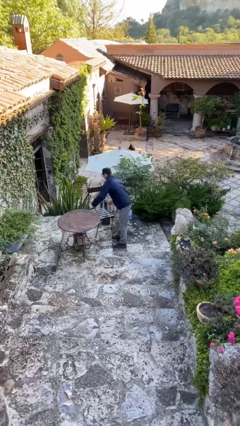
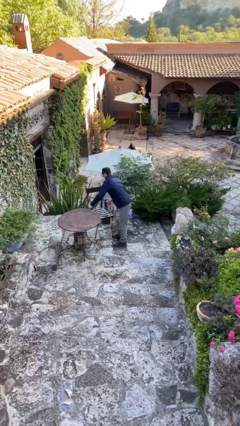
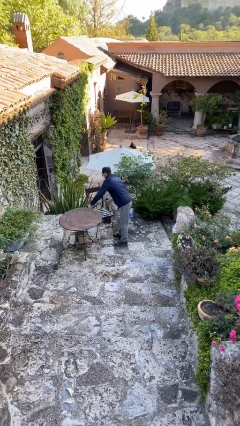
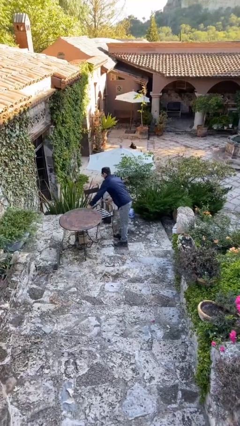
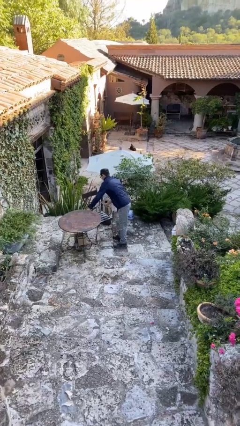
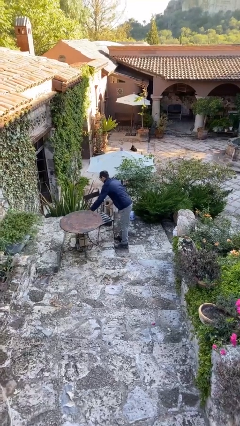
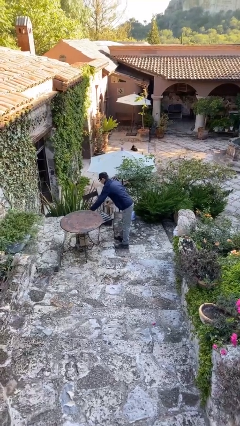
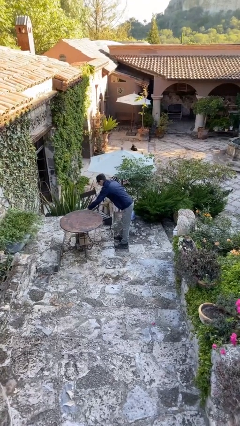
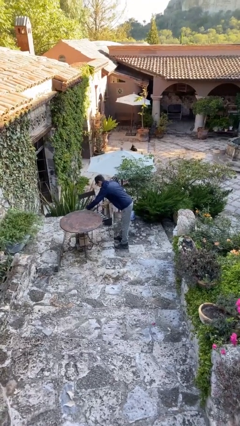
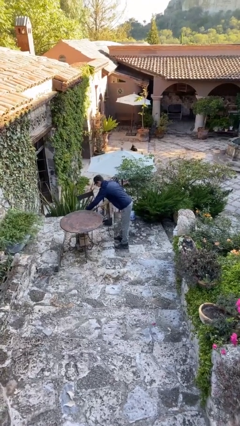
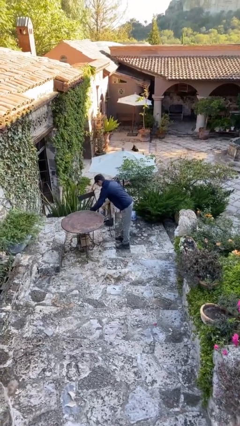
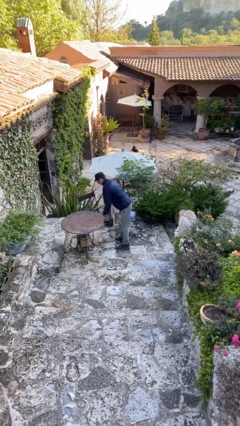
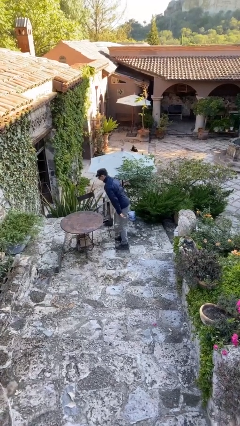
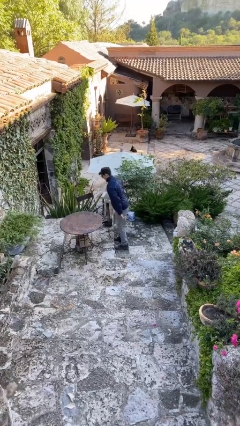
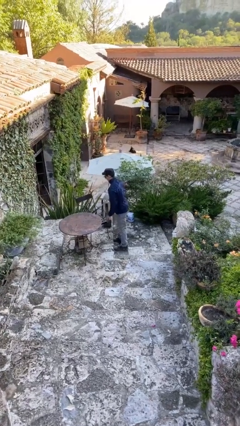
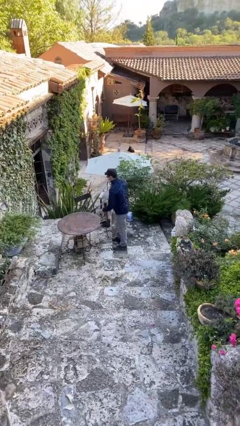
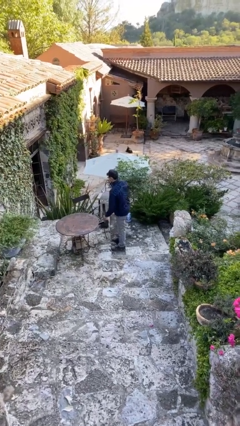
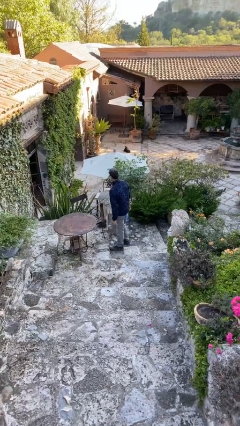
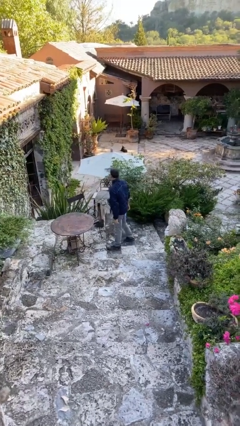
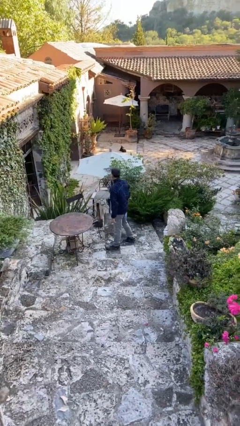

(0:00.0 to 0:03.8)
person puts down object on floor

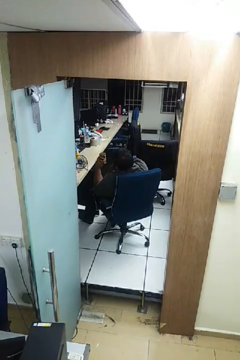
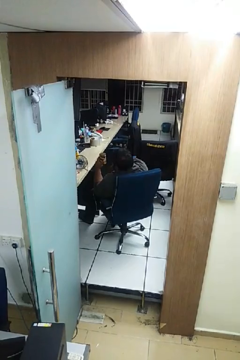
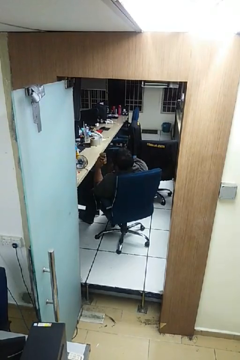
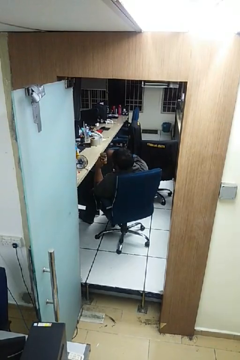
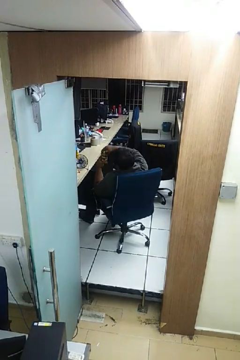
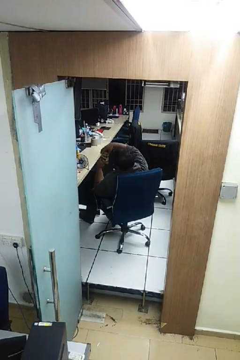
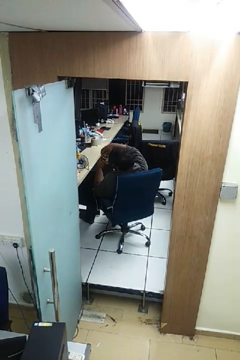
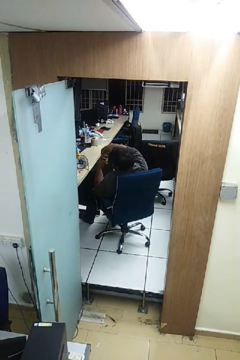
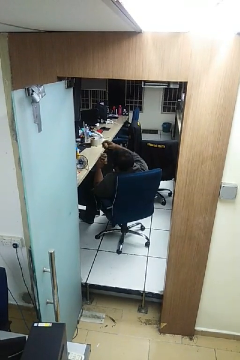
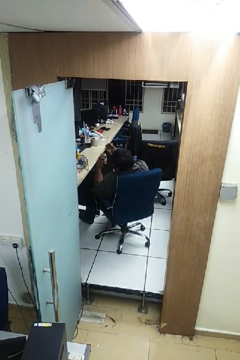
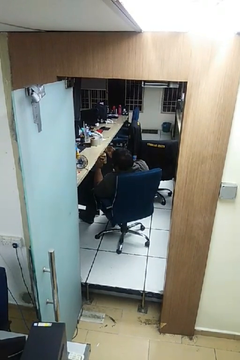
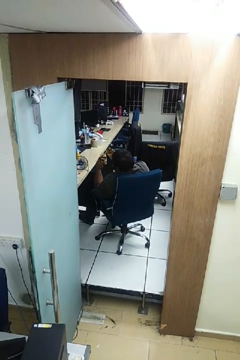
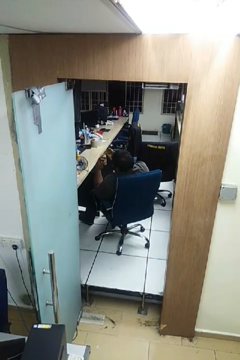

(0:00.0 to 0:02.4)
person opens jar

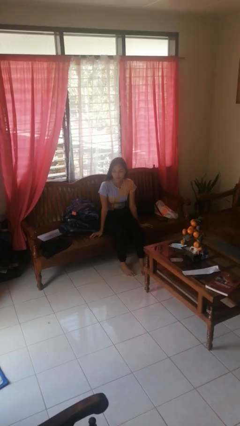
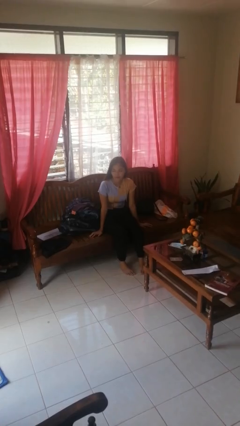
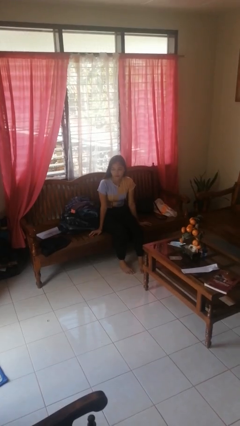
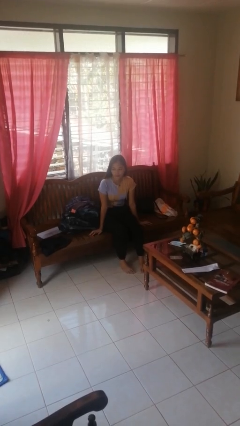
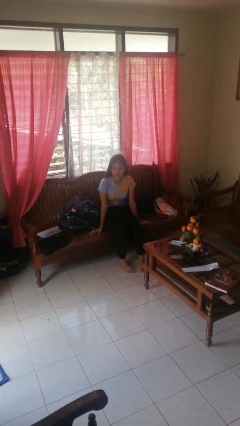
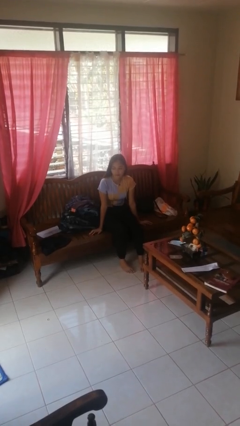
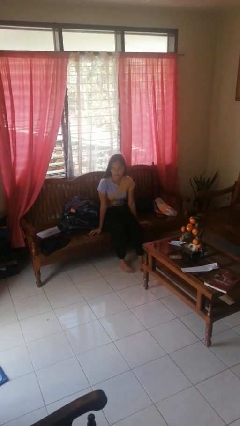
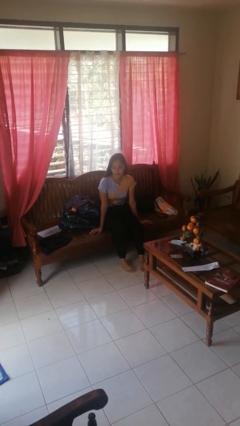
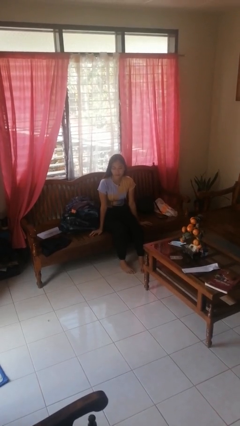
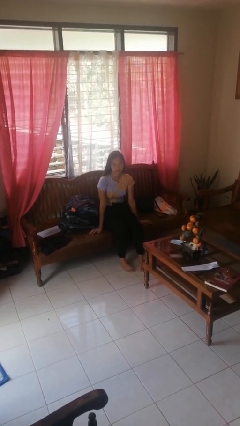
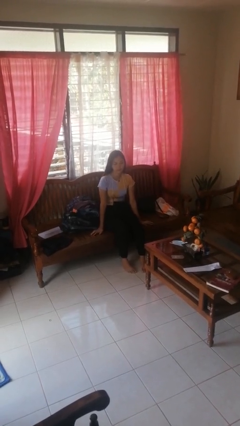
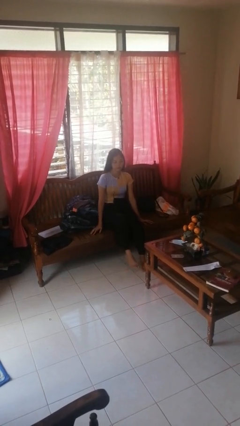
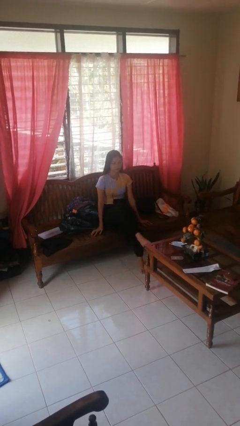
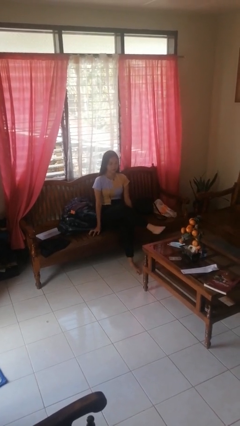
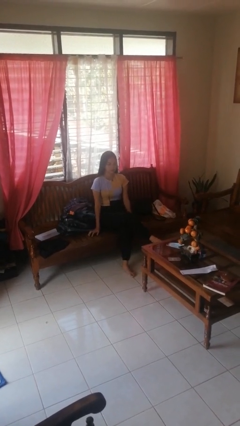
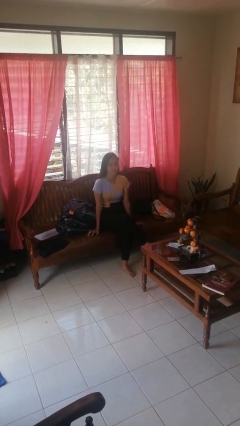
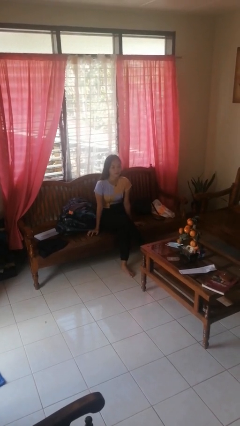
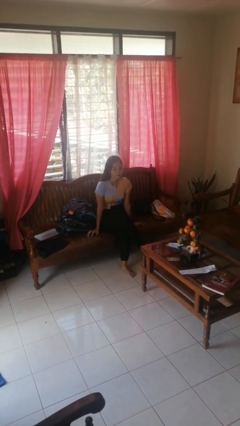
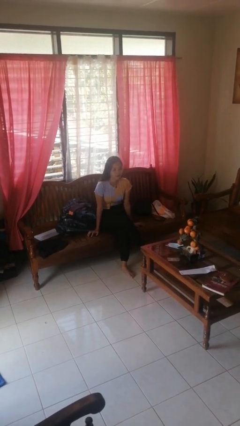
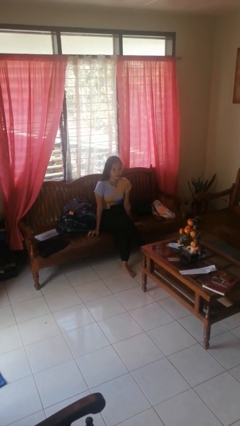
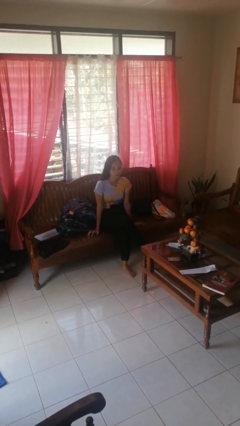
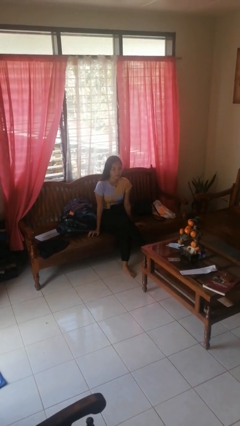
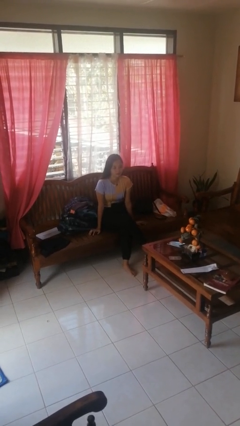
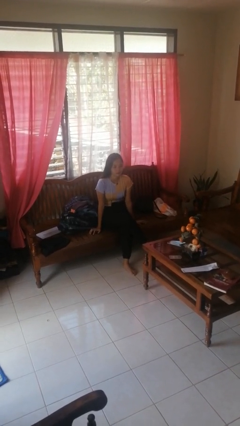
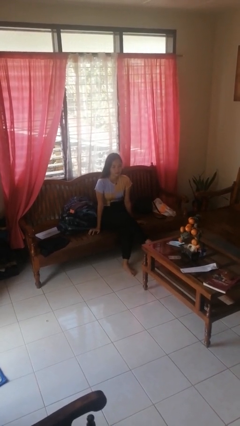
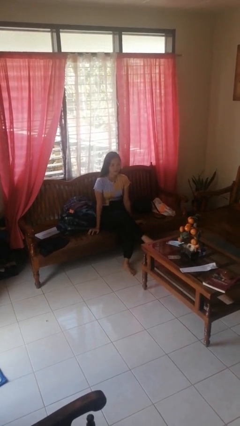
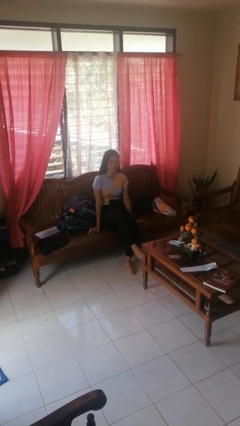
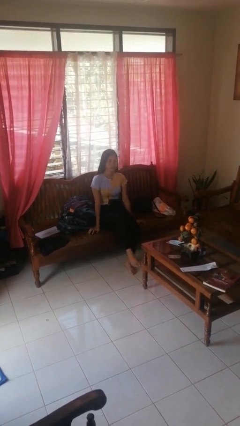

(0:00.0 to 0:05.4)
person crosses legs

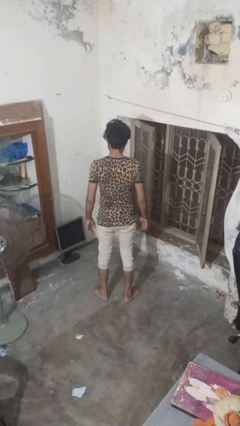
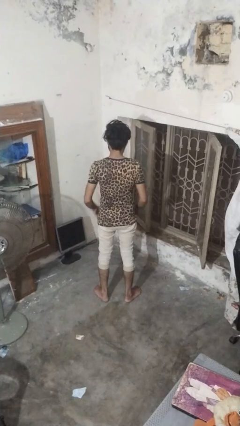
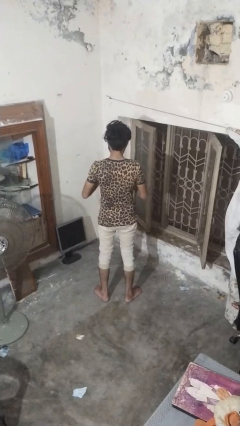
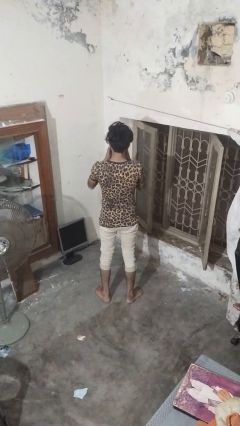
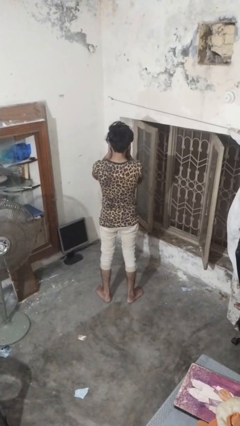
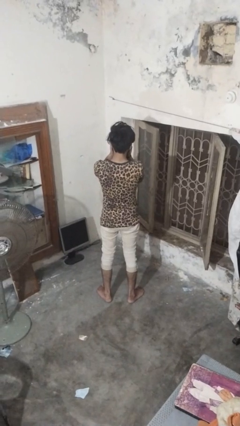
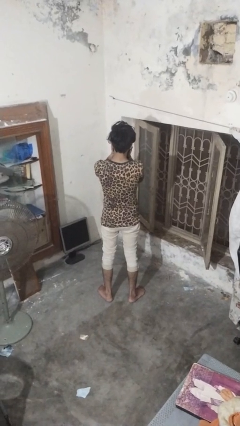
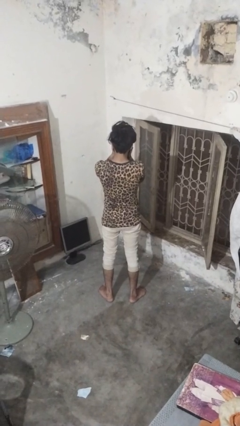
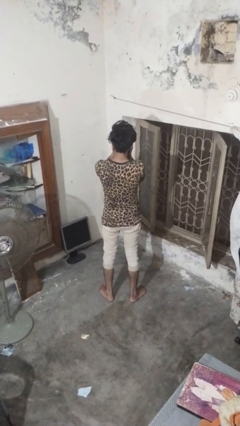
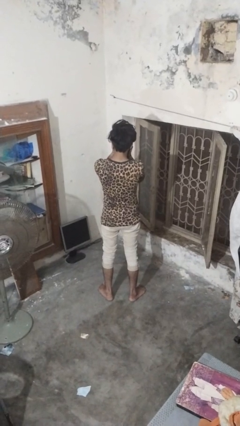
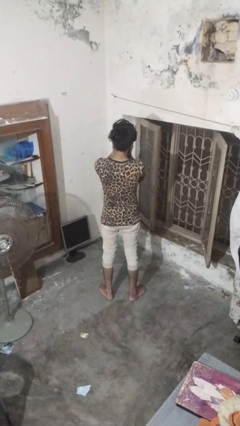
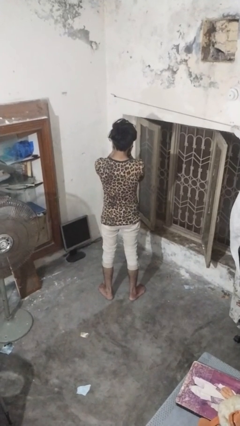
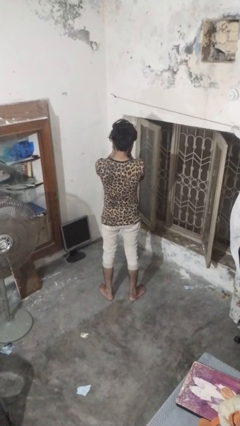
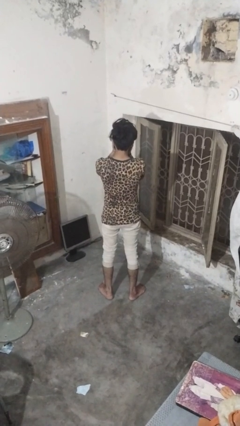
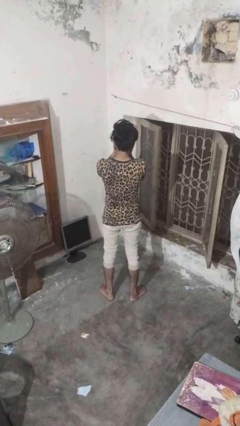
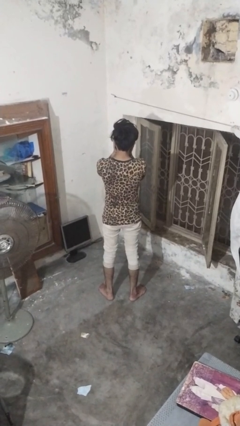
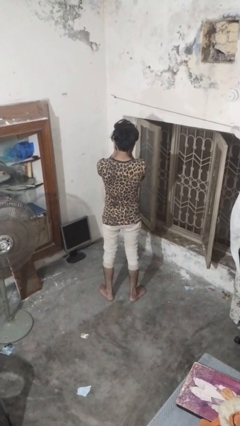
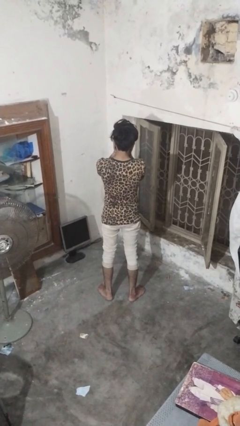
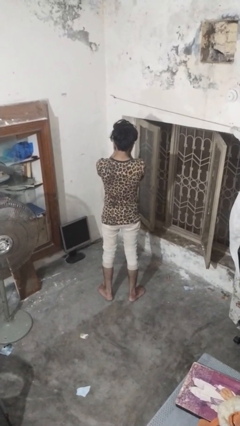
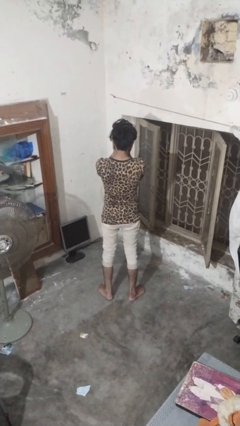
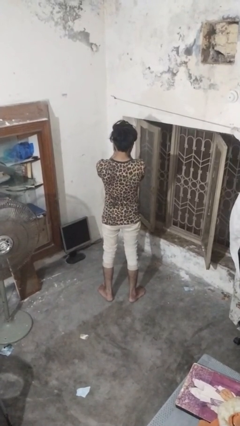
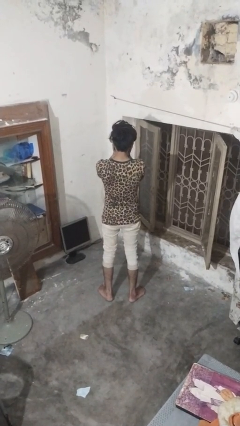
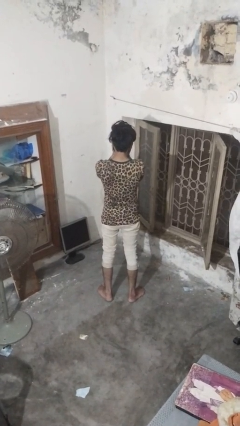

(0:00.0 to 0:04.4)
person covers face with hands

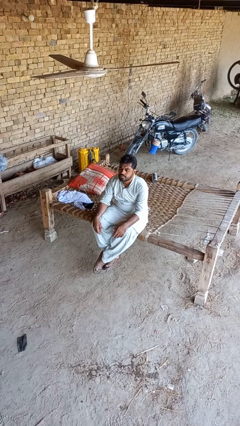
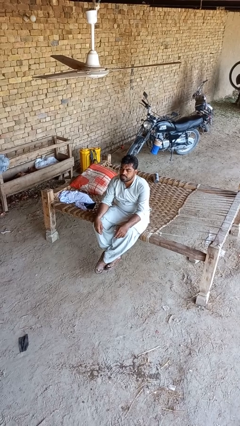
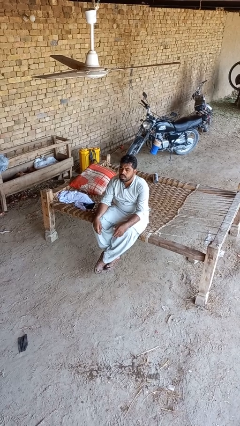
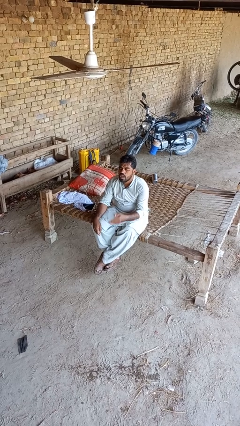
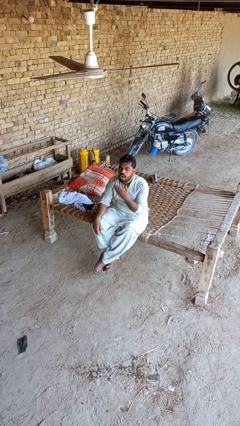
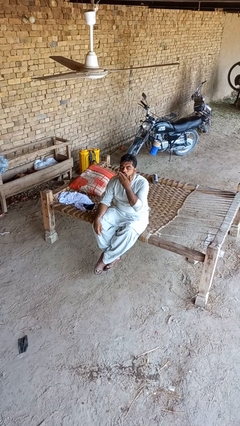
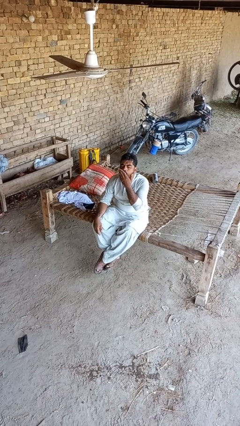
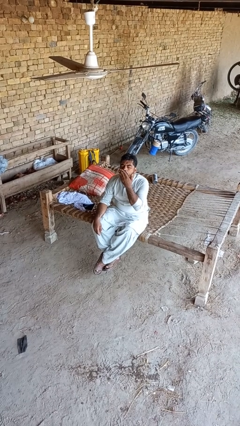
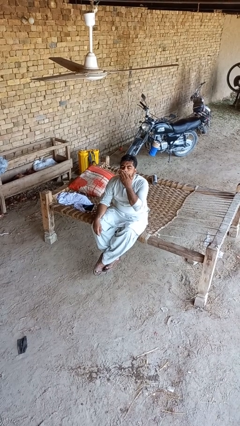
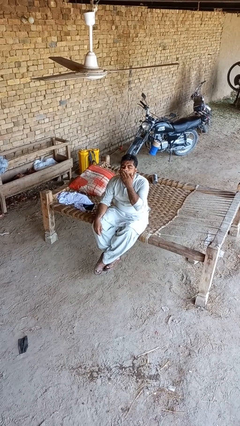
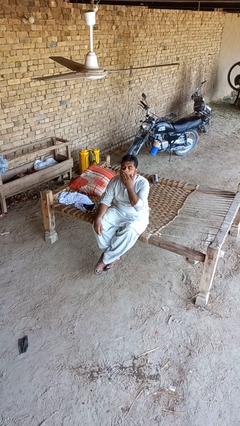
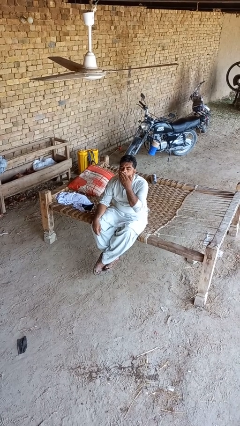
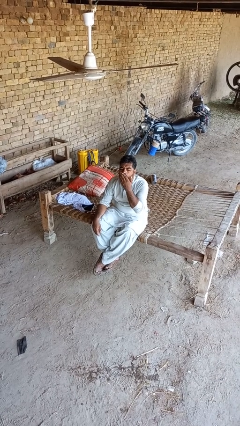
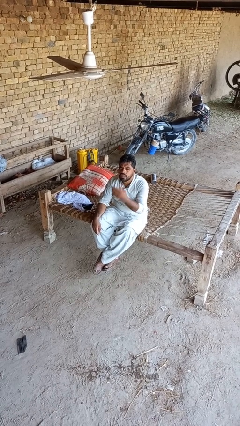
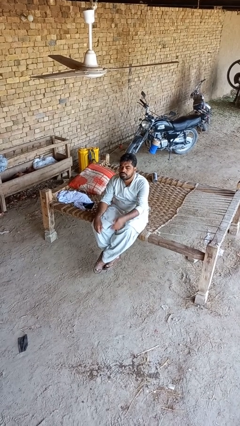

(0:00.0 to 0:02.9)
person yawns
